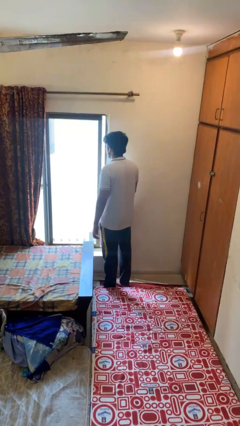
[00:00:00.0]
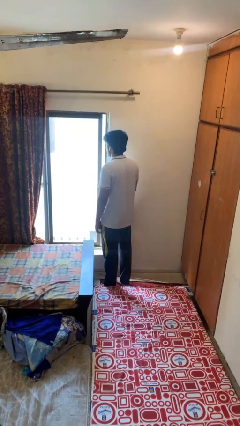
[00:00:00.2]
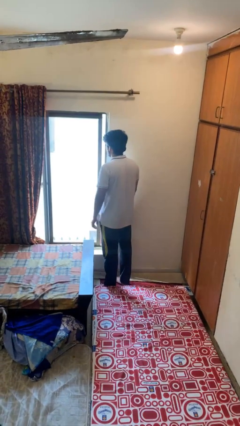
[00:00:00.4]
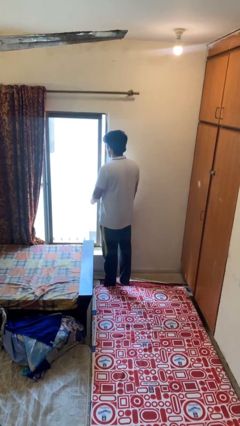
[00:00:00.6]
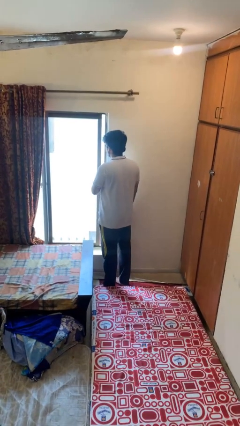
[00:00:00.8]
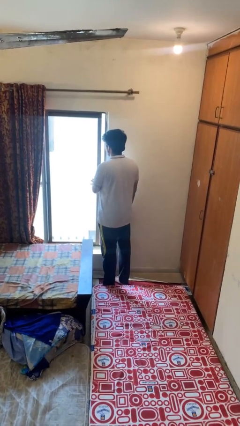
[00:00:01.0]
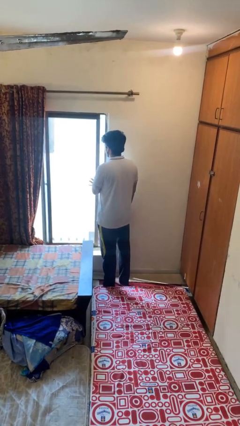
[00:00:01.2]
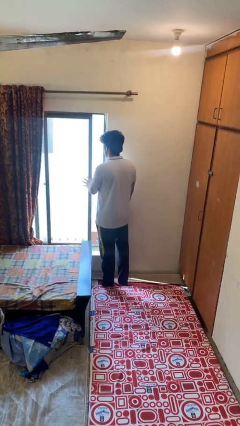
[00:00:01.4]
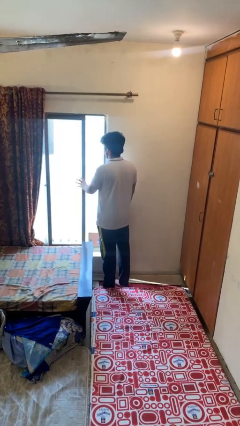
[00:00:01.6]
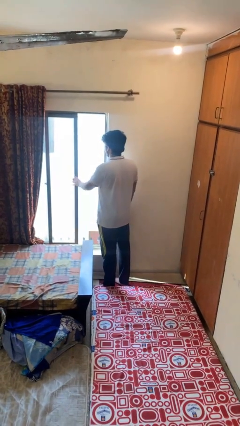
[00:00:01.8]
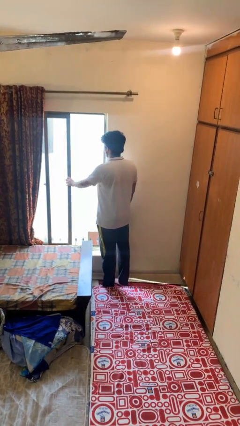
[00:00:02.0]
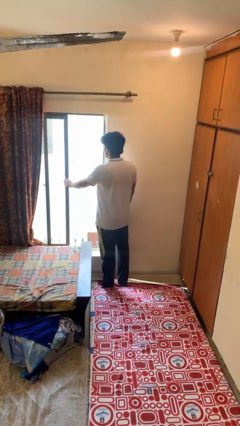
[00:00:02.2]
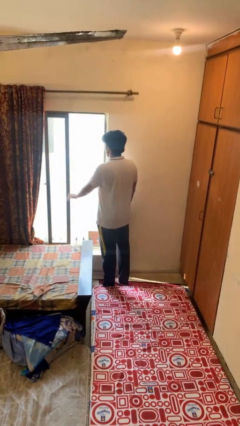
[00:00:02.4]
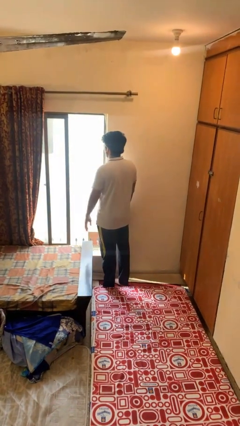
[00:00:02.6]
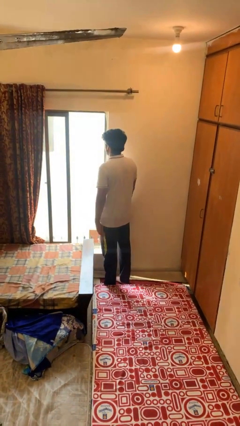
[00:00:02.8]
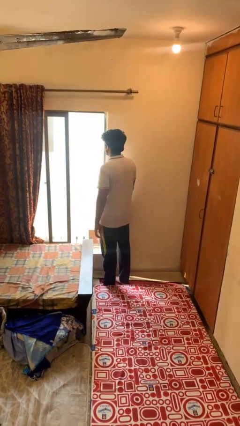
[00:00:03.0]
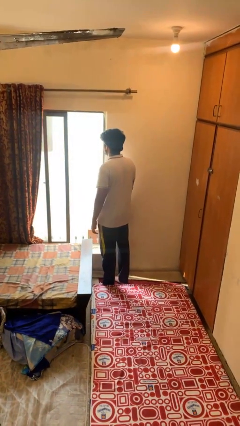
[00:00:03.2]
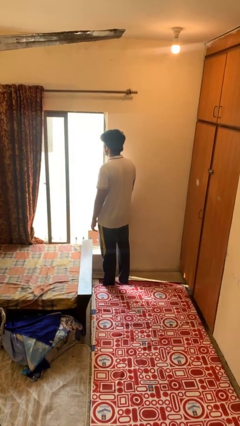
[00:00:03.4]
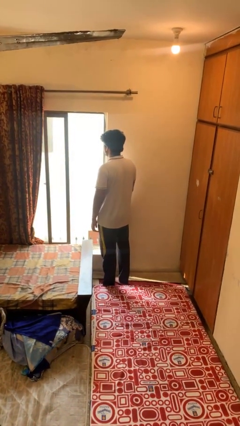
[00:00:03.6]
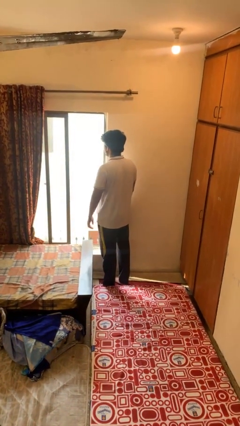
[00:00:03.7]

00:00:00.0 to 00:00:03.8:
person opens home window

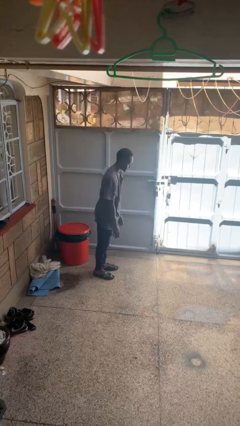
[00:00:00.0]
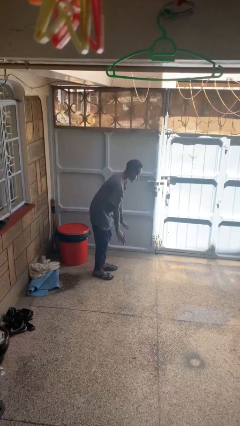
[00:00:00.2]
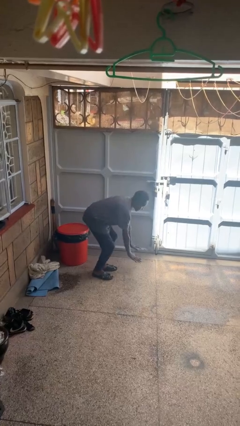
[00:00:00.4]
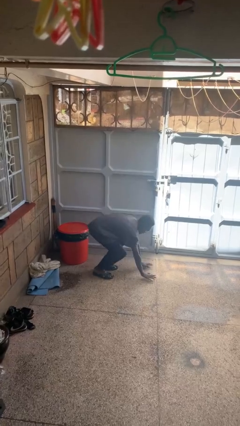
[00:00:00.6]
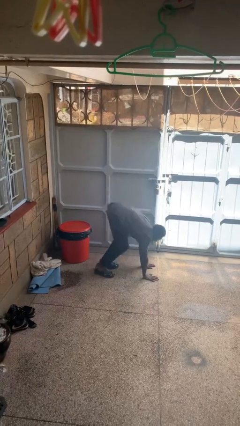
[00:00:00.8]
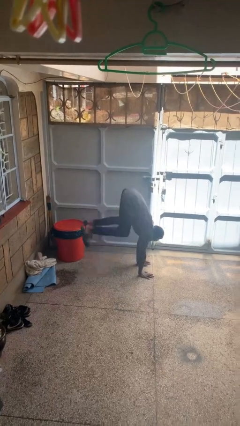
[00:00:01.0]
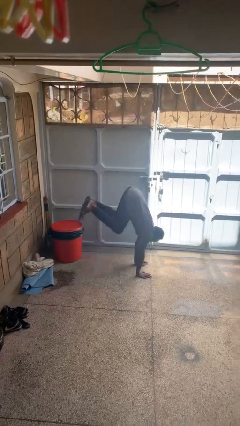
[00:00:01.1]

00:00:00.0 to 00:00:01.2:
person handstand

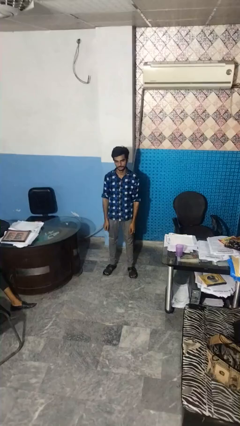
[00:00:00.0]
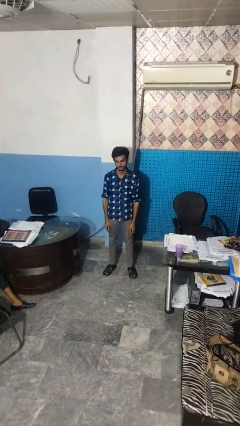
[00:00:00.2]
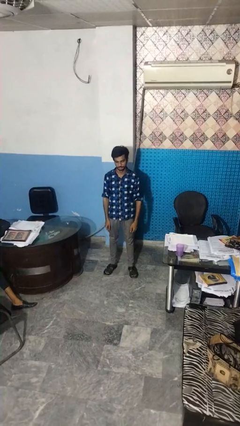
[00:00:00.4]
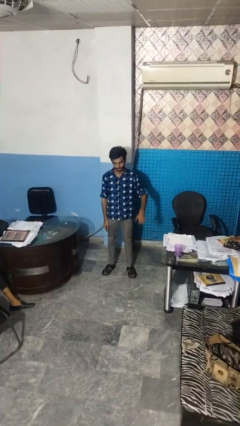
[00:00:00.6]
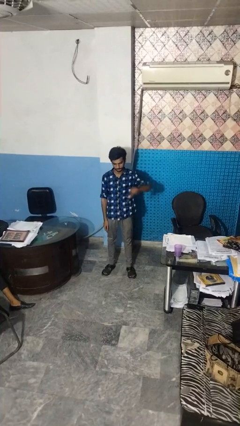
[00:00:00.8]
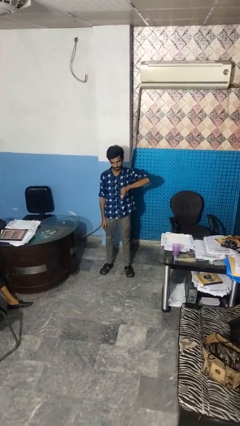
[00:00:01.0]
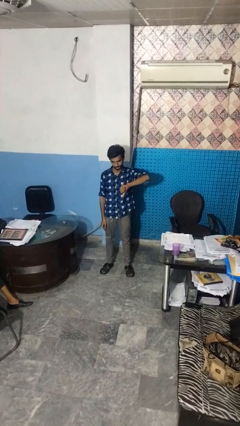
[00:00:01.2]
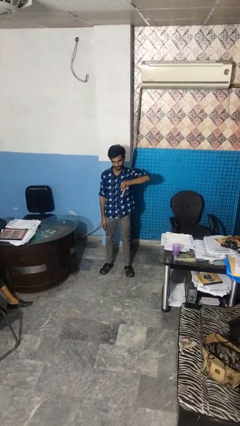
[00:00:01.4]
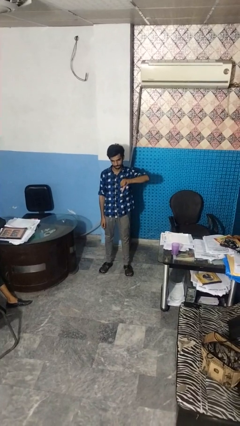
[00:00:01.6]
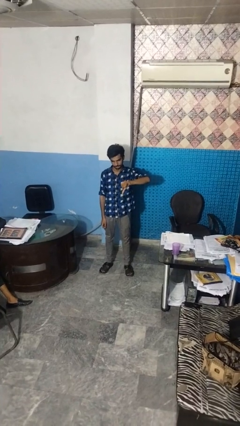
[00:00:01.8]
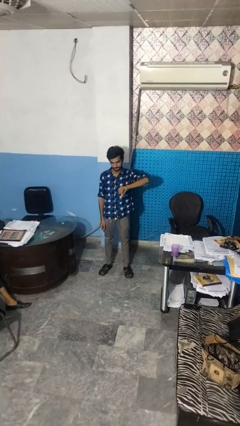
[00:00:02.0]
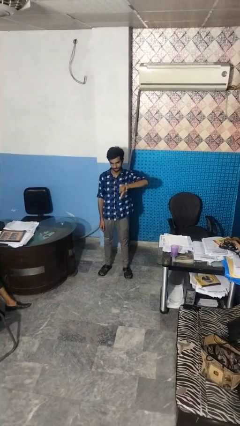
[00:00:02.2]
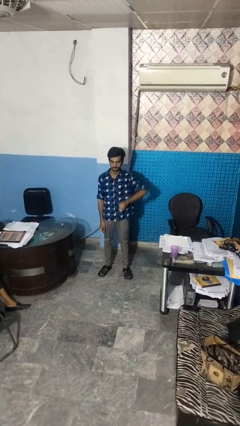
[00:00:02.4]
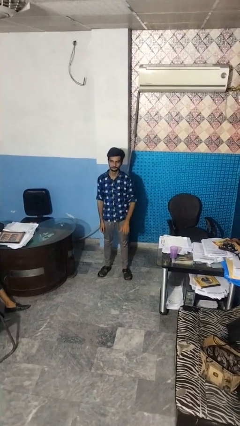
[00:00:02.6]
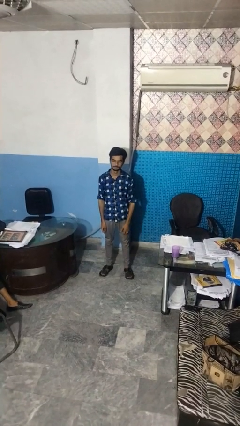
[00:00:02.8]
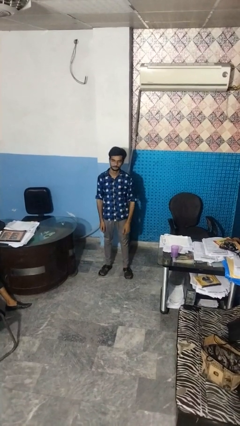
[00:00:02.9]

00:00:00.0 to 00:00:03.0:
person gestures thumbs down

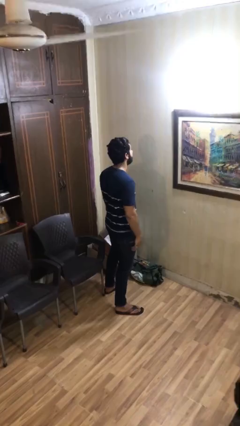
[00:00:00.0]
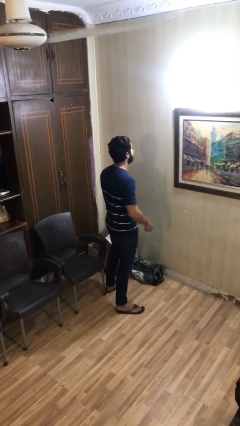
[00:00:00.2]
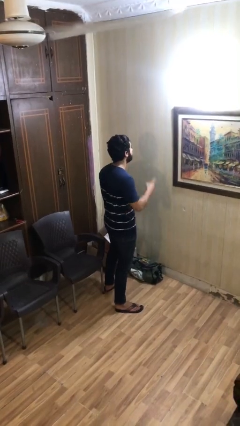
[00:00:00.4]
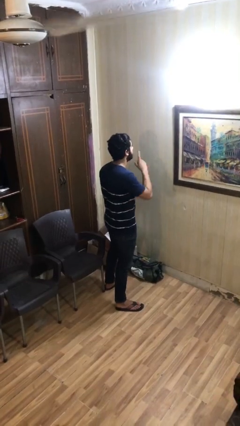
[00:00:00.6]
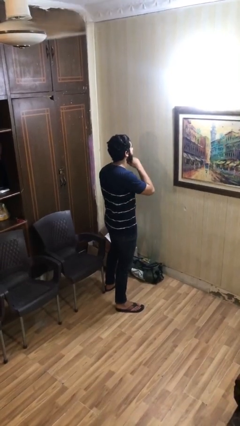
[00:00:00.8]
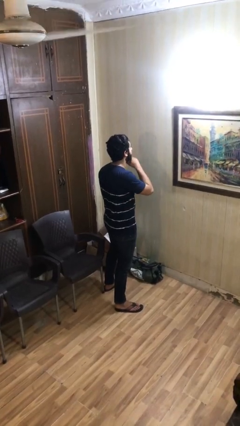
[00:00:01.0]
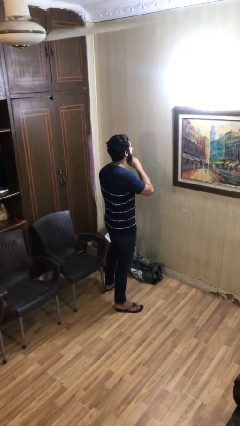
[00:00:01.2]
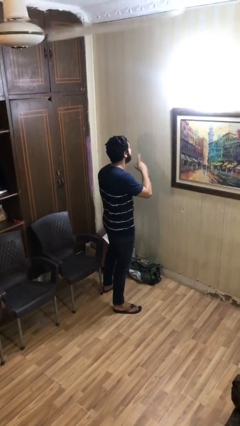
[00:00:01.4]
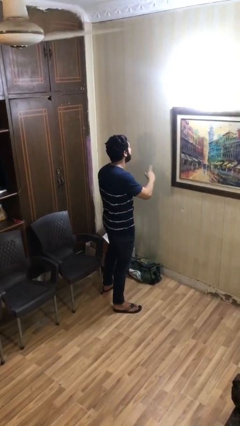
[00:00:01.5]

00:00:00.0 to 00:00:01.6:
person gestures be quiet

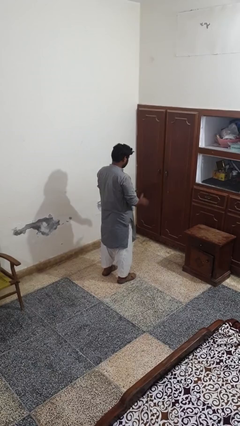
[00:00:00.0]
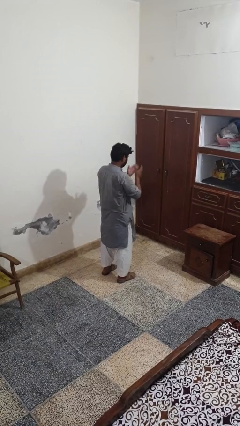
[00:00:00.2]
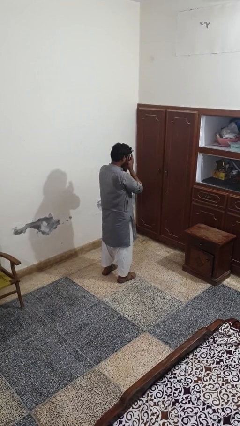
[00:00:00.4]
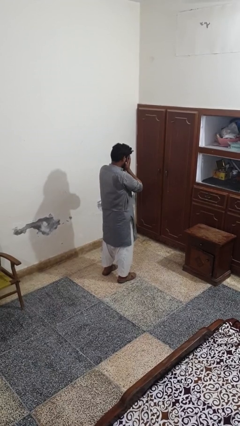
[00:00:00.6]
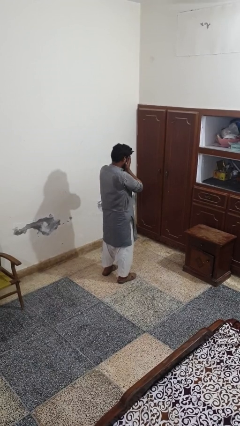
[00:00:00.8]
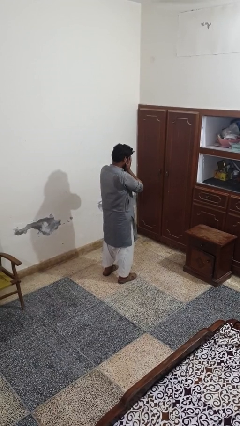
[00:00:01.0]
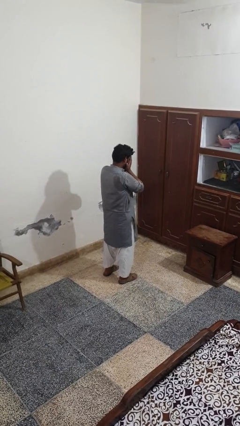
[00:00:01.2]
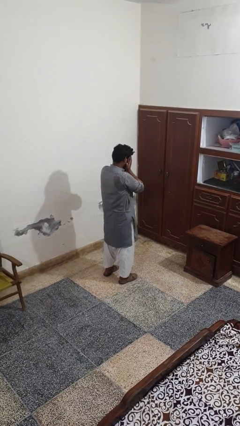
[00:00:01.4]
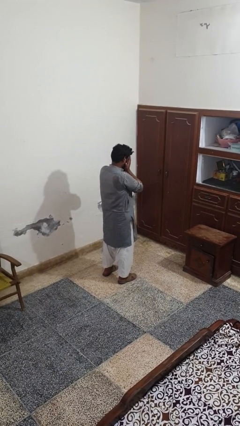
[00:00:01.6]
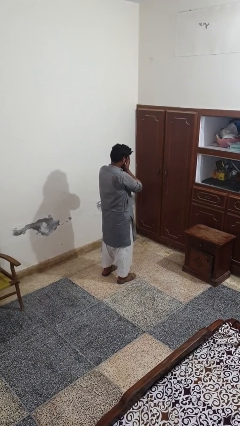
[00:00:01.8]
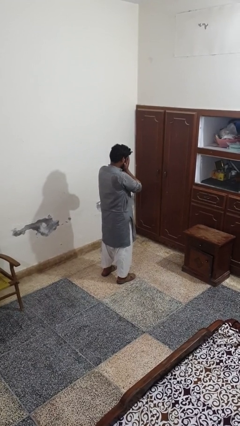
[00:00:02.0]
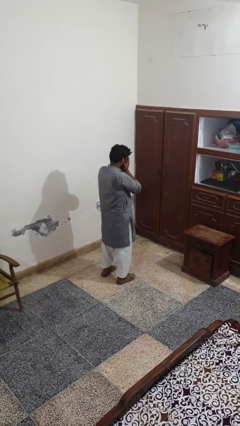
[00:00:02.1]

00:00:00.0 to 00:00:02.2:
person covers face with hands

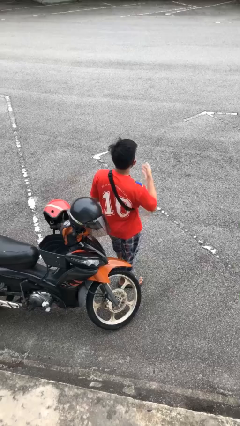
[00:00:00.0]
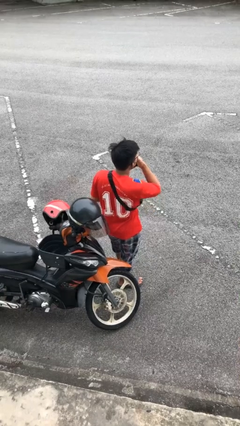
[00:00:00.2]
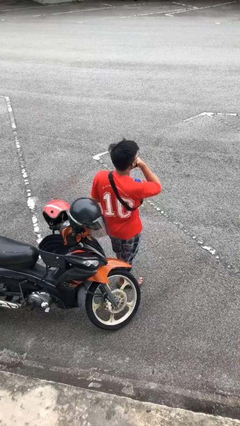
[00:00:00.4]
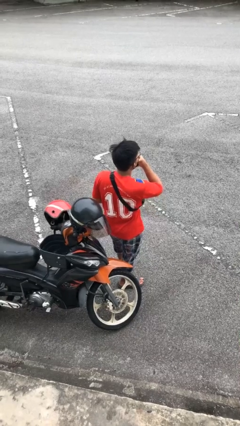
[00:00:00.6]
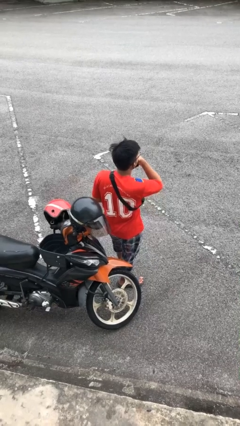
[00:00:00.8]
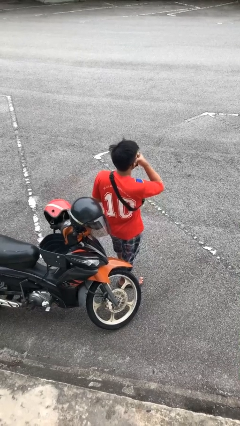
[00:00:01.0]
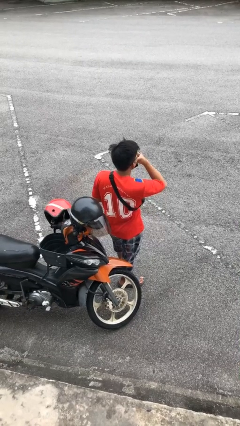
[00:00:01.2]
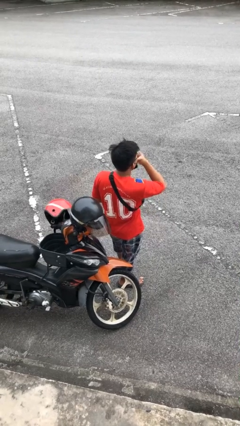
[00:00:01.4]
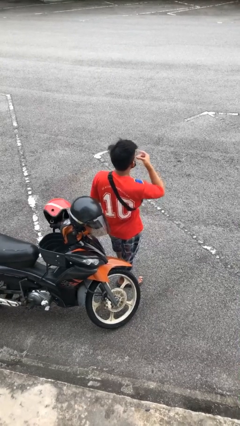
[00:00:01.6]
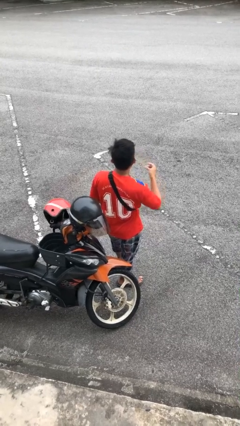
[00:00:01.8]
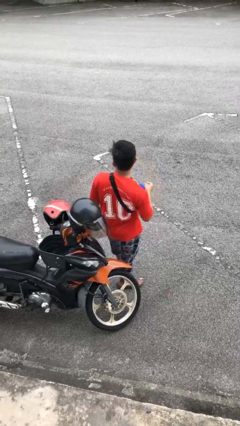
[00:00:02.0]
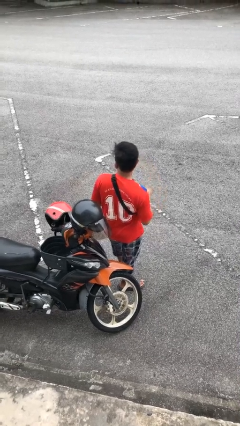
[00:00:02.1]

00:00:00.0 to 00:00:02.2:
person scratches face

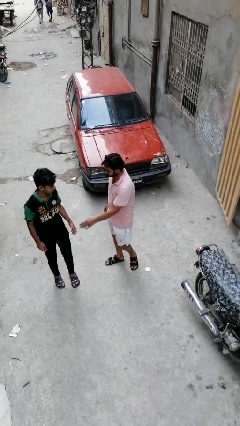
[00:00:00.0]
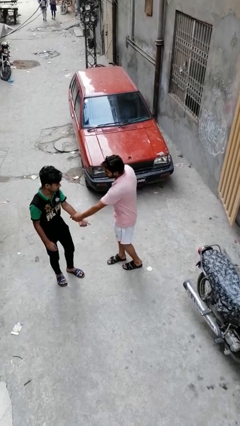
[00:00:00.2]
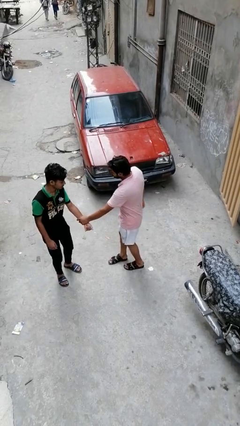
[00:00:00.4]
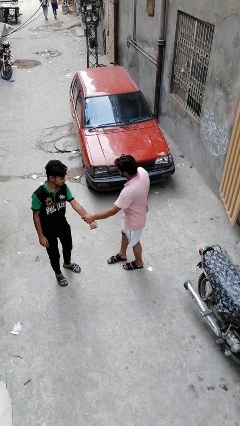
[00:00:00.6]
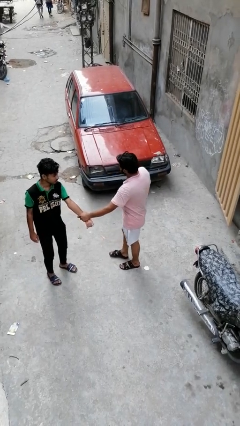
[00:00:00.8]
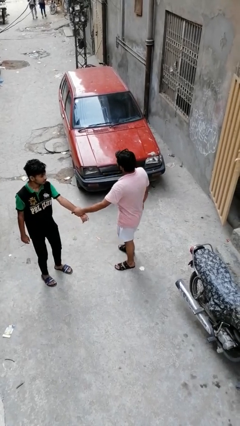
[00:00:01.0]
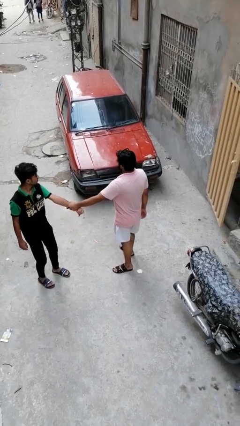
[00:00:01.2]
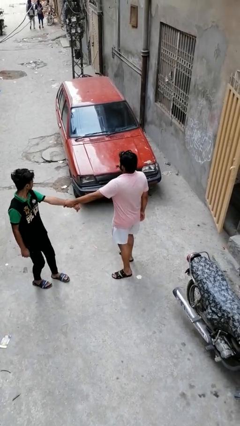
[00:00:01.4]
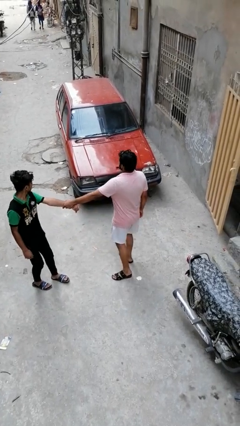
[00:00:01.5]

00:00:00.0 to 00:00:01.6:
person grabs person by forearm

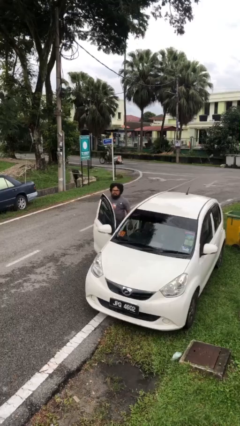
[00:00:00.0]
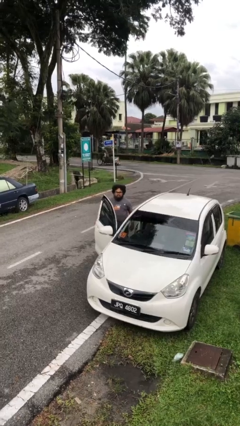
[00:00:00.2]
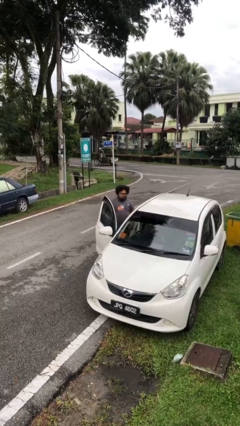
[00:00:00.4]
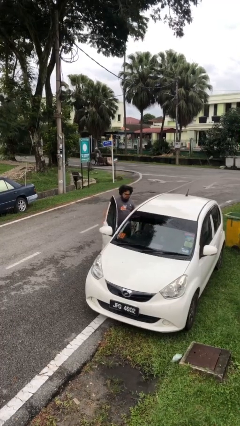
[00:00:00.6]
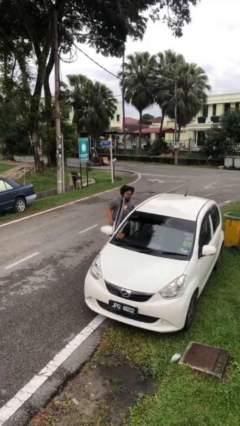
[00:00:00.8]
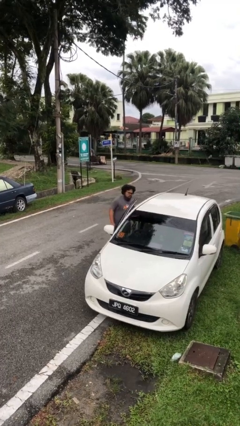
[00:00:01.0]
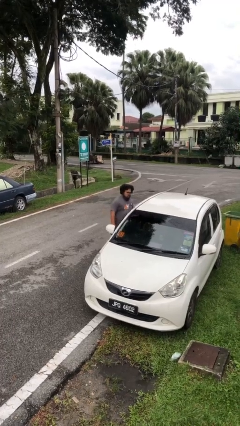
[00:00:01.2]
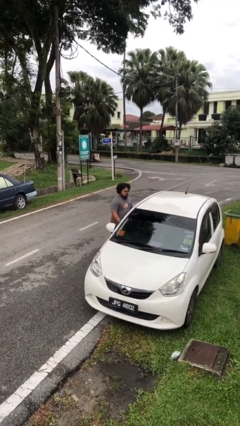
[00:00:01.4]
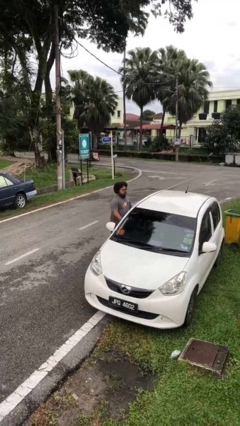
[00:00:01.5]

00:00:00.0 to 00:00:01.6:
person closes car door
